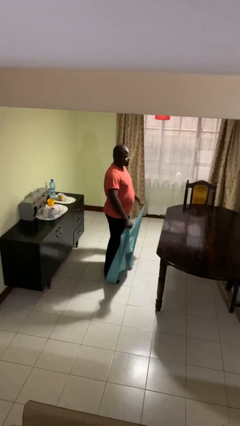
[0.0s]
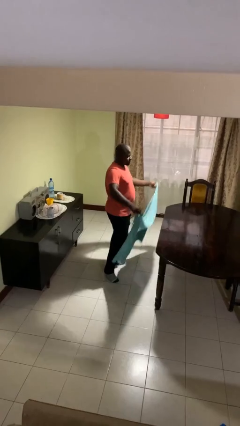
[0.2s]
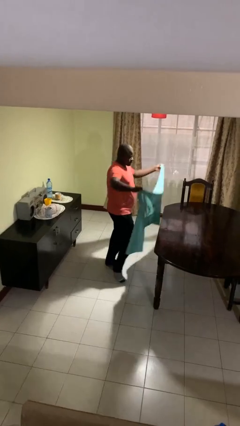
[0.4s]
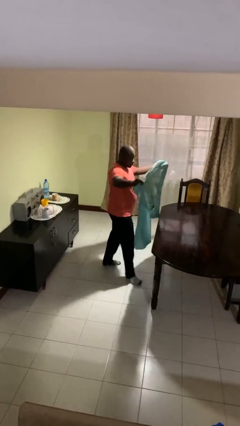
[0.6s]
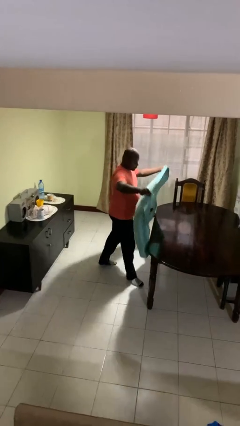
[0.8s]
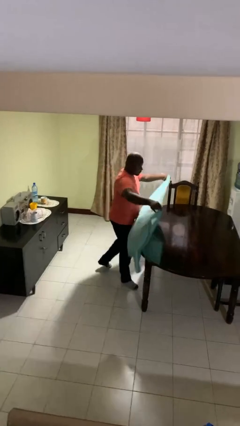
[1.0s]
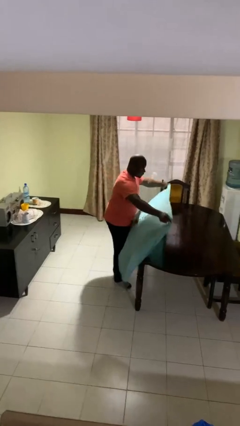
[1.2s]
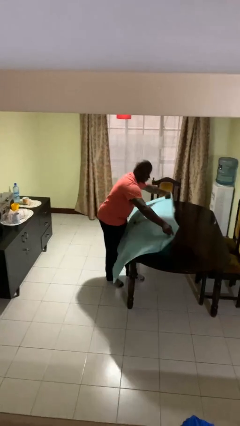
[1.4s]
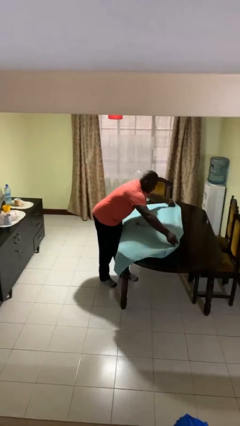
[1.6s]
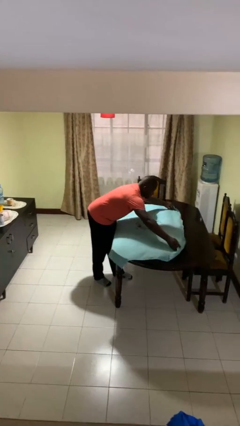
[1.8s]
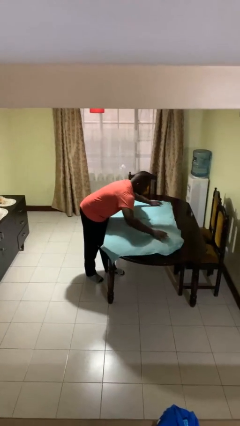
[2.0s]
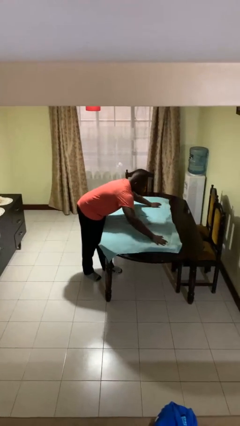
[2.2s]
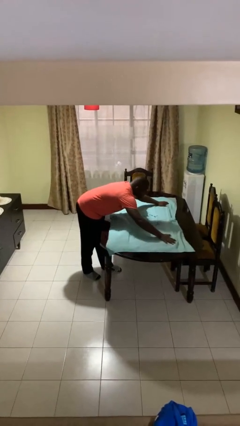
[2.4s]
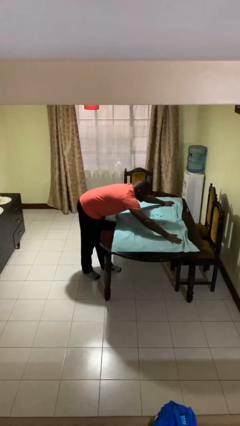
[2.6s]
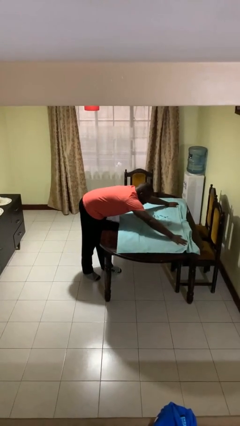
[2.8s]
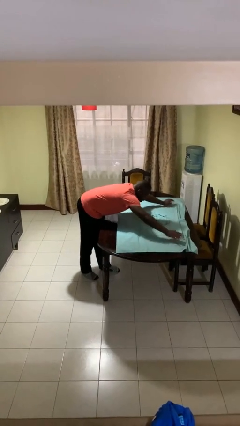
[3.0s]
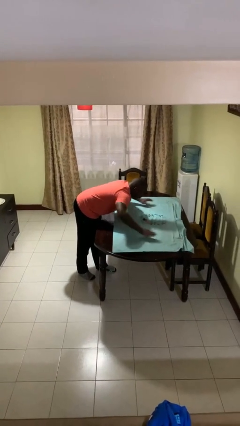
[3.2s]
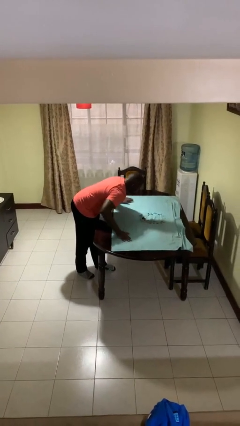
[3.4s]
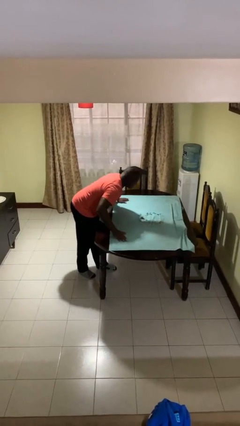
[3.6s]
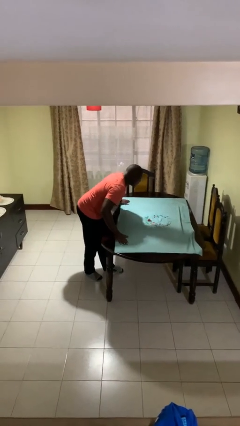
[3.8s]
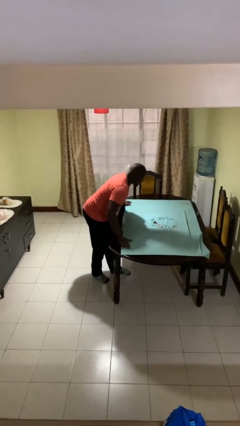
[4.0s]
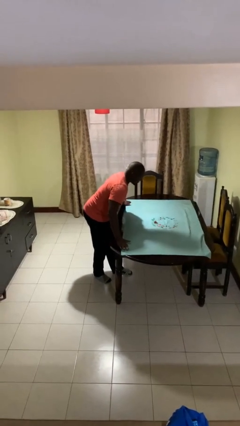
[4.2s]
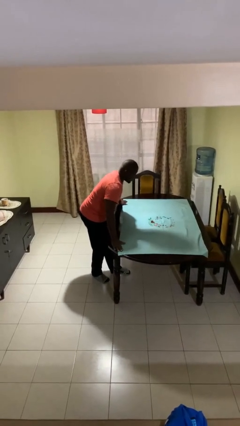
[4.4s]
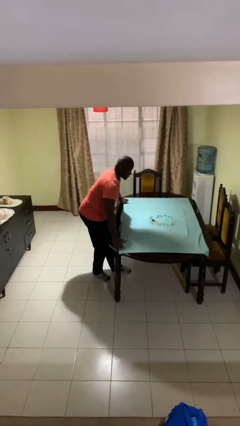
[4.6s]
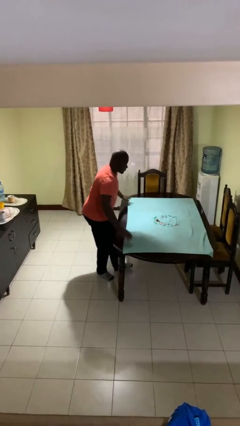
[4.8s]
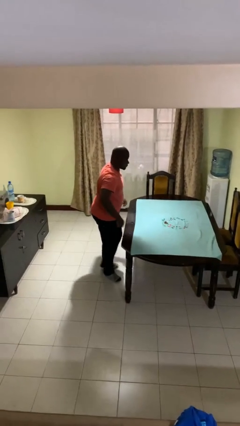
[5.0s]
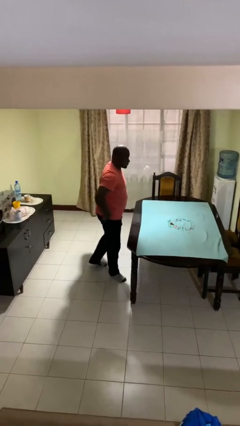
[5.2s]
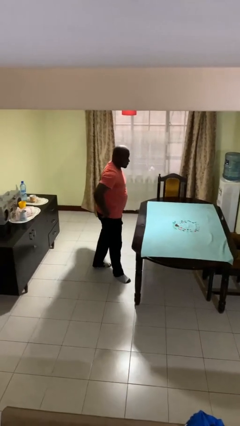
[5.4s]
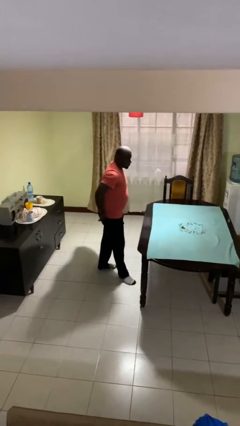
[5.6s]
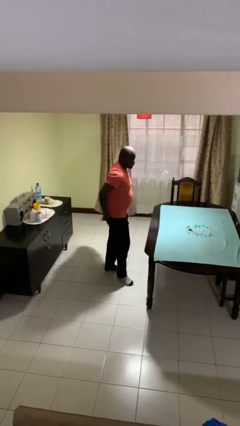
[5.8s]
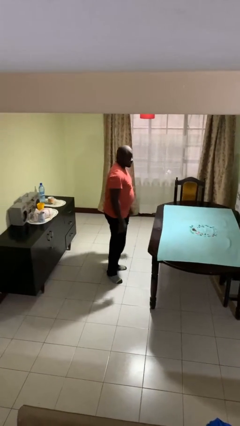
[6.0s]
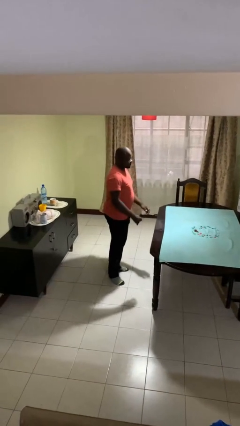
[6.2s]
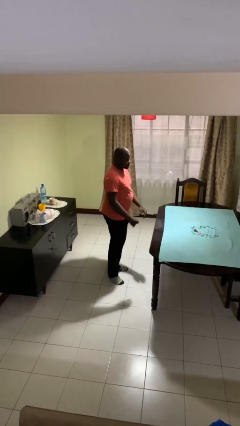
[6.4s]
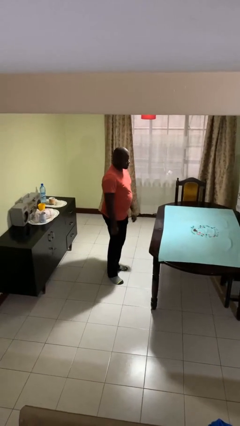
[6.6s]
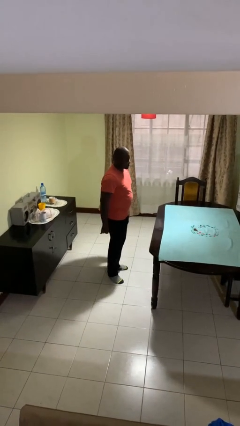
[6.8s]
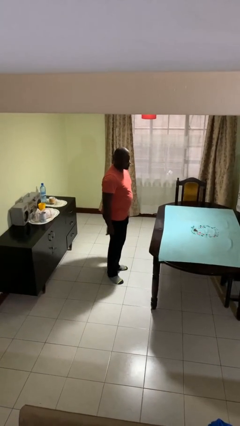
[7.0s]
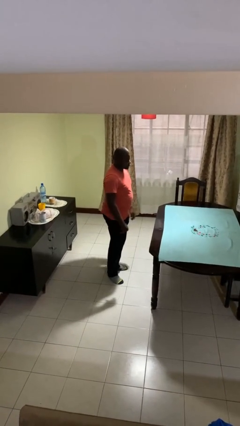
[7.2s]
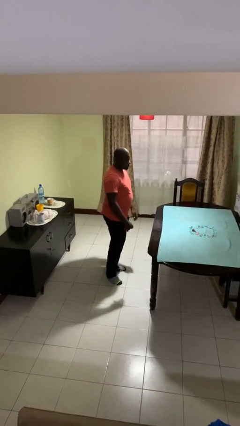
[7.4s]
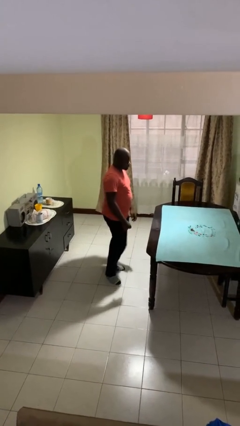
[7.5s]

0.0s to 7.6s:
person spreads tablecloth

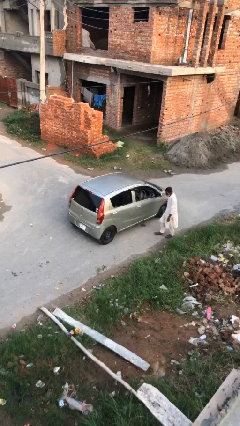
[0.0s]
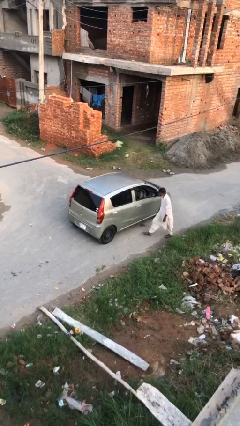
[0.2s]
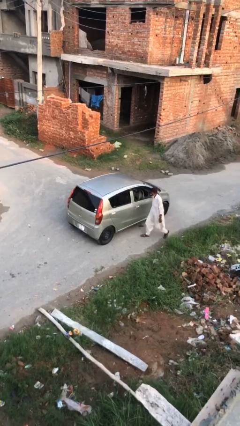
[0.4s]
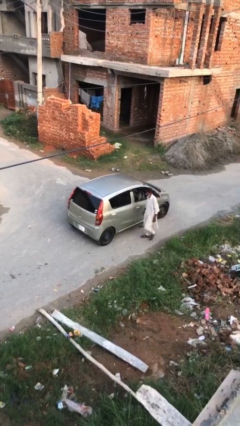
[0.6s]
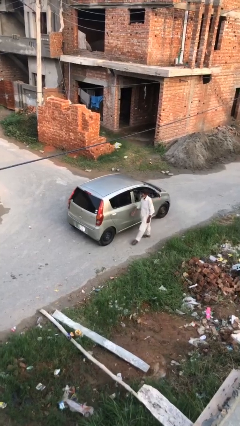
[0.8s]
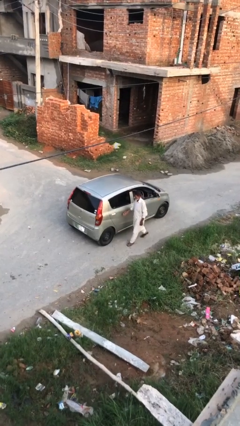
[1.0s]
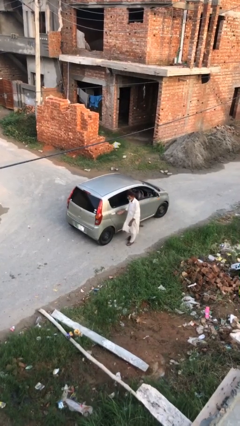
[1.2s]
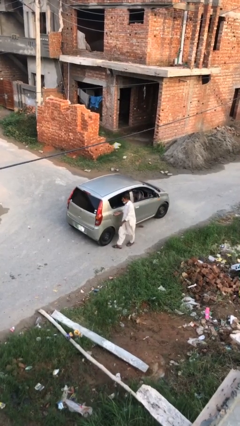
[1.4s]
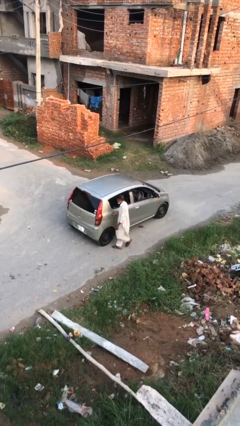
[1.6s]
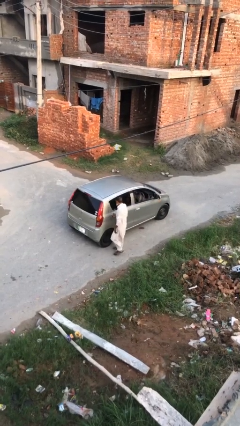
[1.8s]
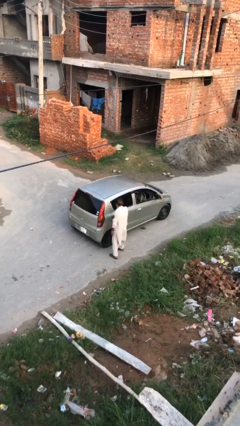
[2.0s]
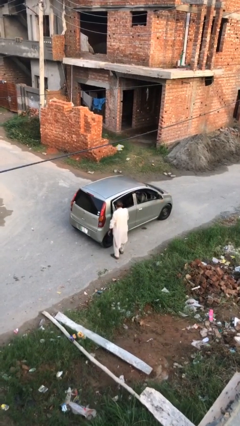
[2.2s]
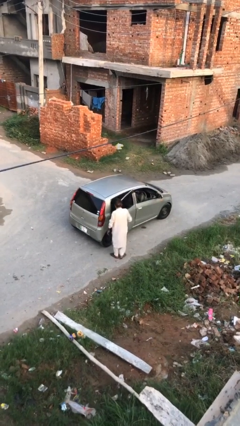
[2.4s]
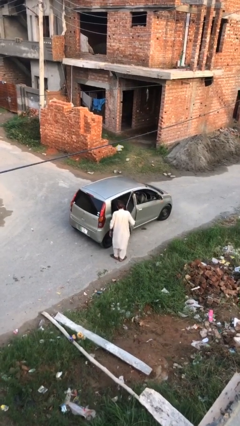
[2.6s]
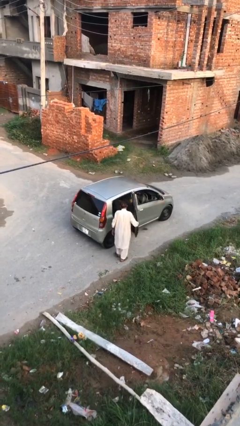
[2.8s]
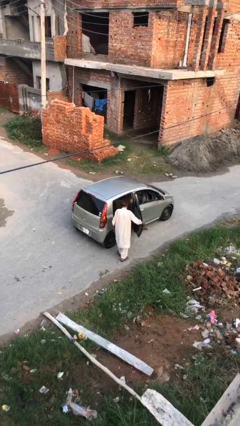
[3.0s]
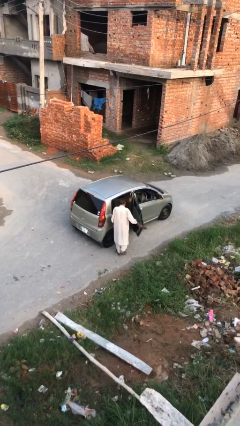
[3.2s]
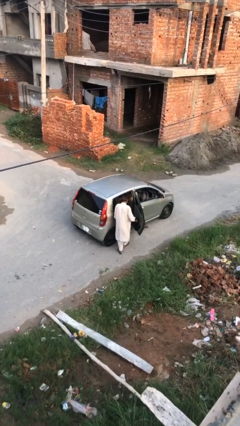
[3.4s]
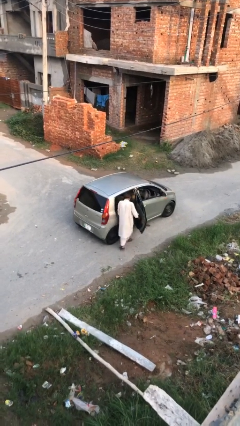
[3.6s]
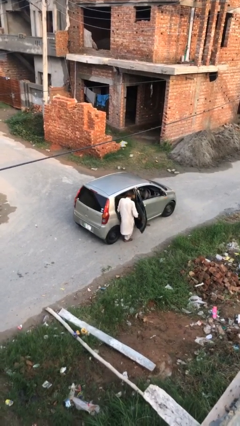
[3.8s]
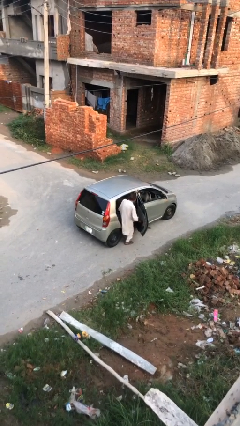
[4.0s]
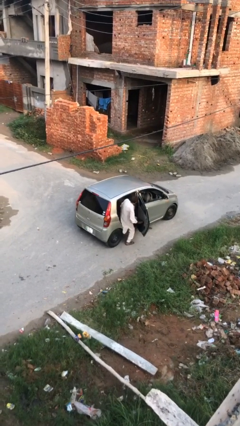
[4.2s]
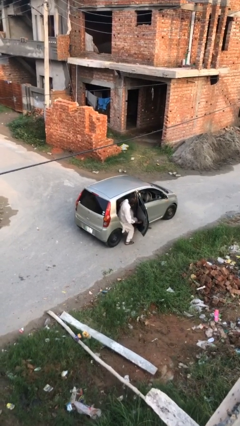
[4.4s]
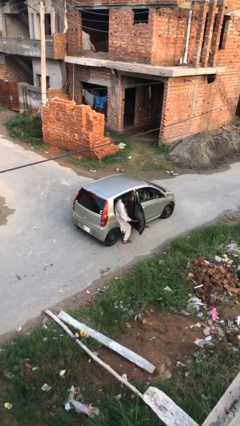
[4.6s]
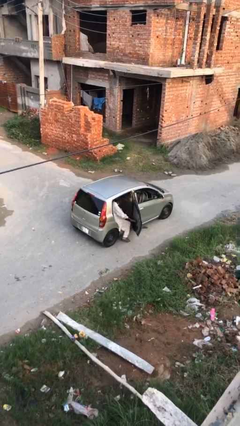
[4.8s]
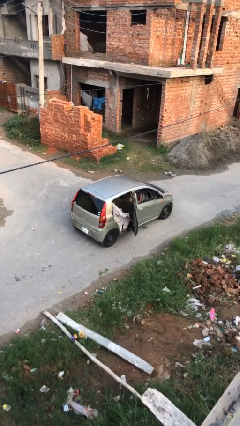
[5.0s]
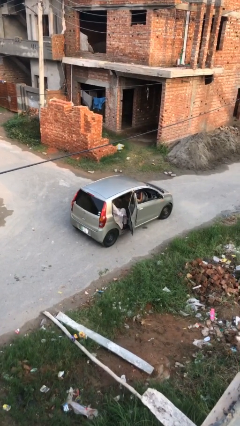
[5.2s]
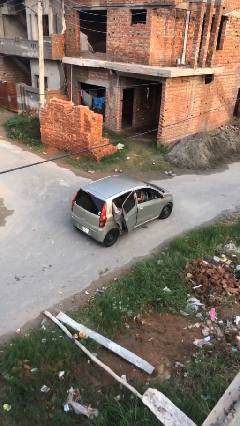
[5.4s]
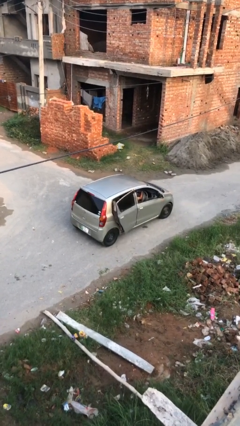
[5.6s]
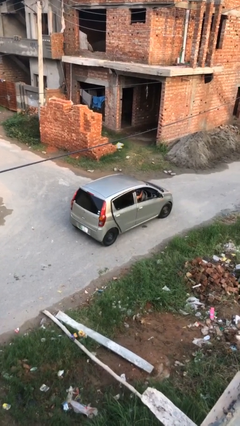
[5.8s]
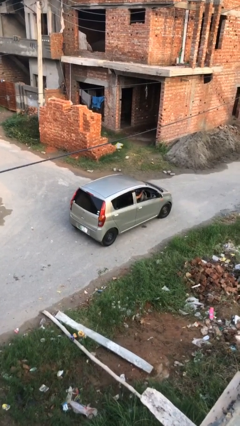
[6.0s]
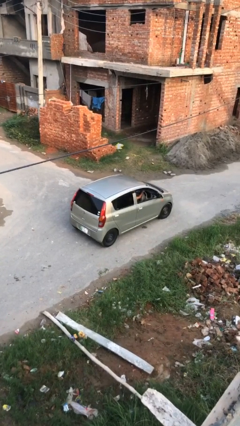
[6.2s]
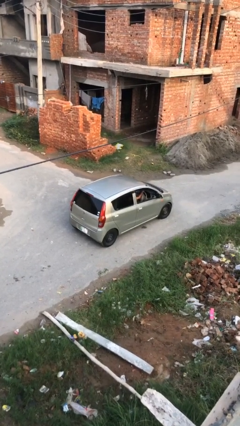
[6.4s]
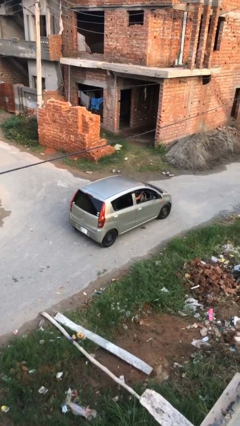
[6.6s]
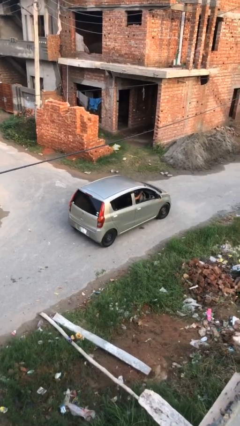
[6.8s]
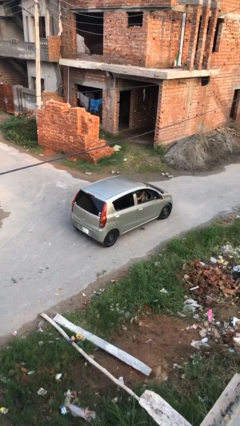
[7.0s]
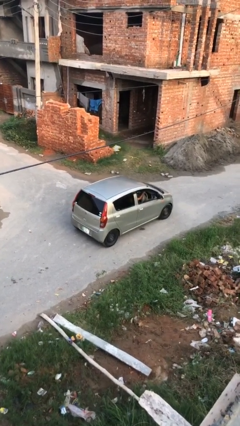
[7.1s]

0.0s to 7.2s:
car picks up person

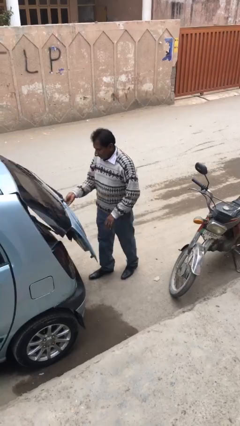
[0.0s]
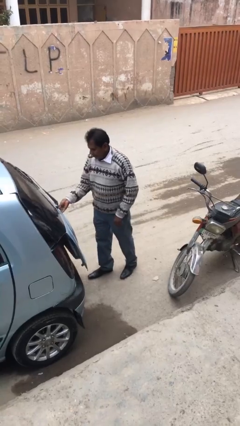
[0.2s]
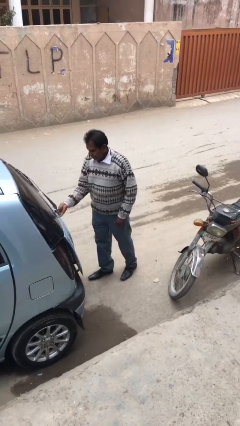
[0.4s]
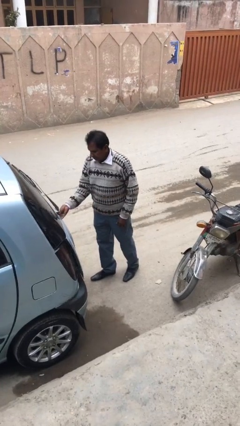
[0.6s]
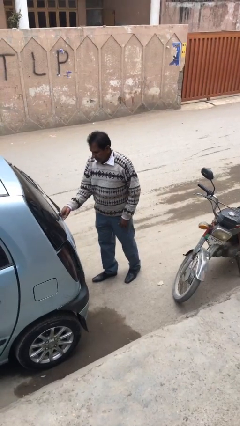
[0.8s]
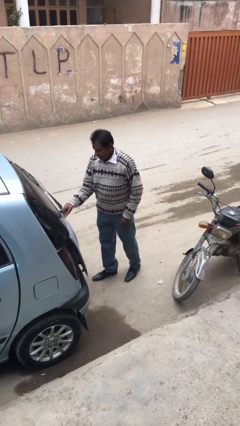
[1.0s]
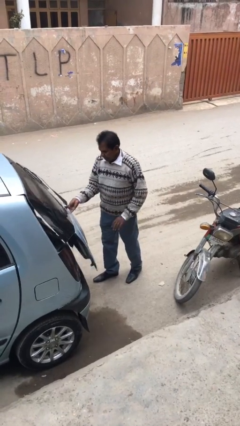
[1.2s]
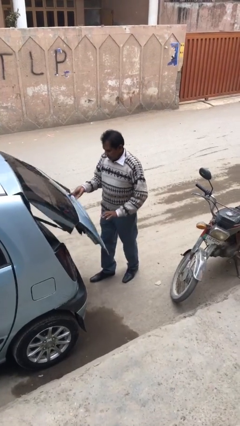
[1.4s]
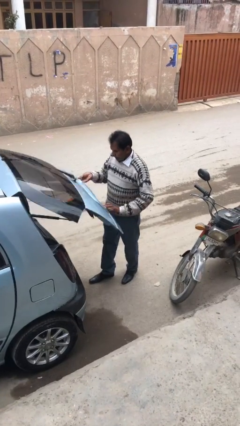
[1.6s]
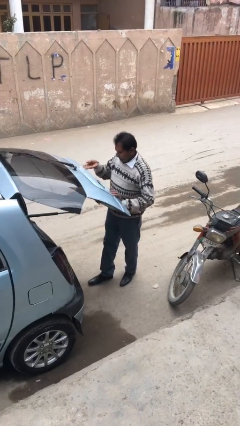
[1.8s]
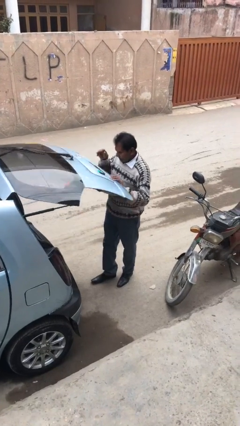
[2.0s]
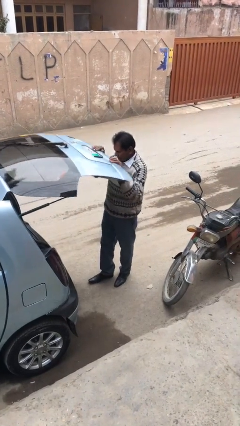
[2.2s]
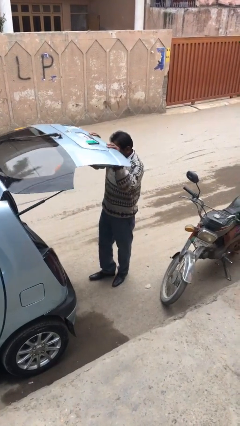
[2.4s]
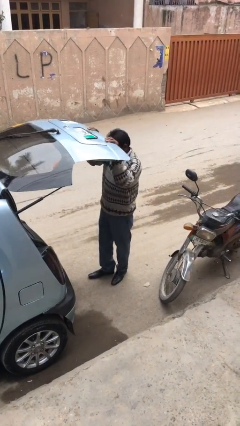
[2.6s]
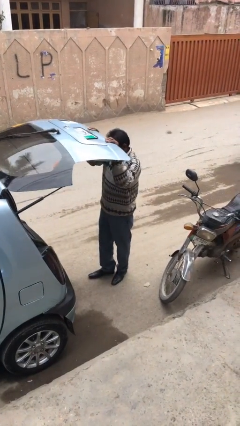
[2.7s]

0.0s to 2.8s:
person opens car trunk

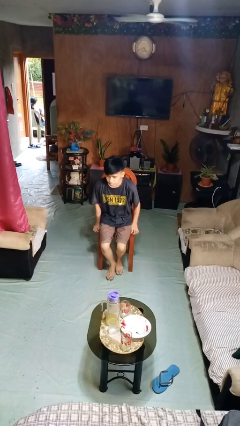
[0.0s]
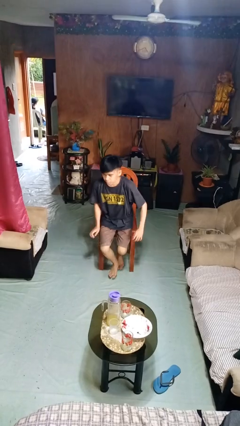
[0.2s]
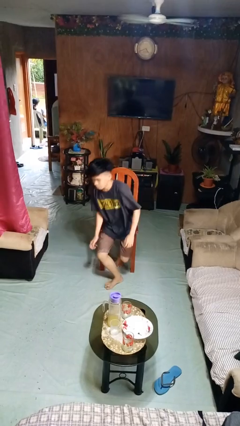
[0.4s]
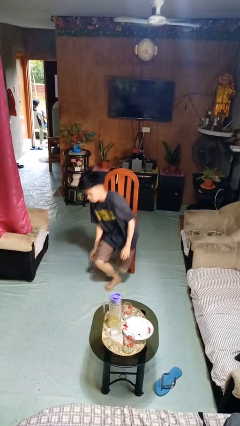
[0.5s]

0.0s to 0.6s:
person falls from chair
